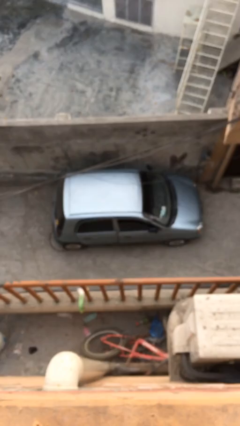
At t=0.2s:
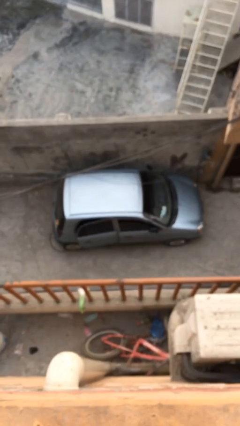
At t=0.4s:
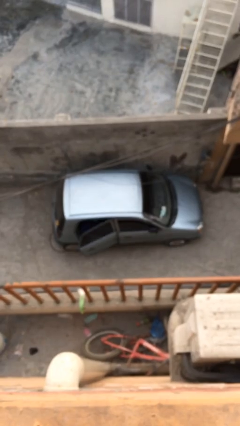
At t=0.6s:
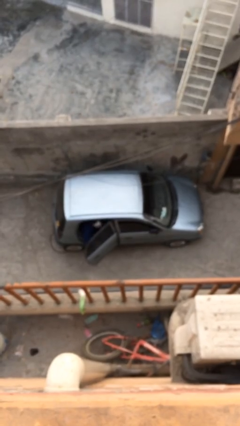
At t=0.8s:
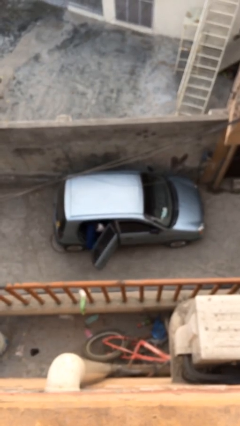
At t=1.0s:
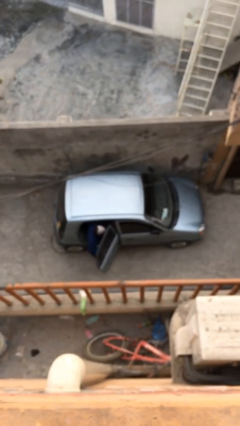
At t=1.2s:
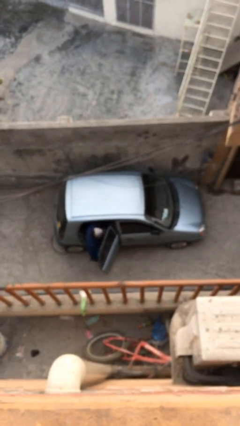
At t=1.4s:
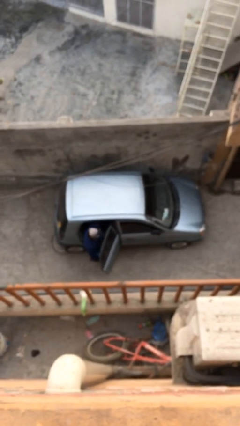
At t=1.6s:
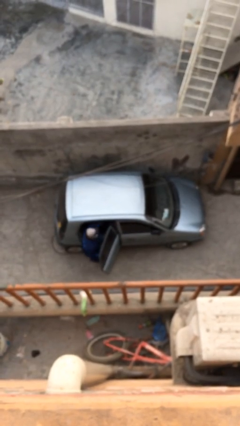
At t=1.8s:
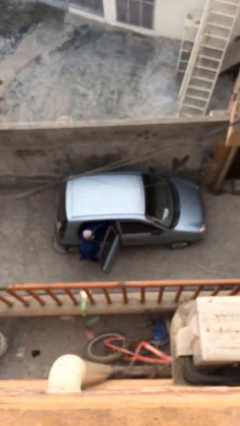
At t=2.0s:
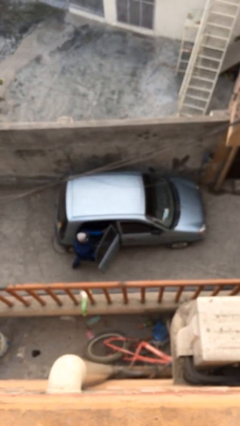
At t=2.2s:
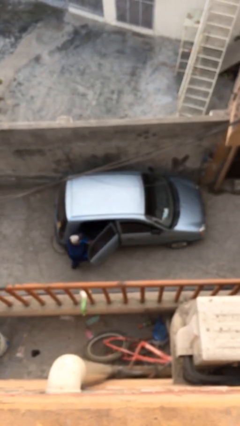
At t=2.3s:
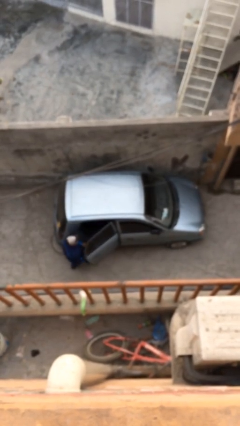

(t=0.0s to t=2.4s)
car drops off person

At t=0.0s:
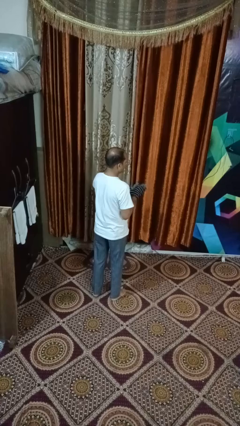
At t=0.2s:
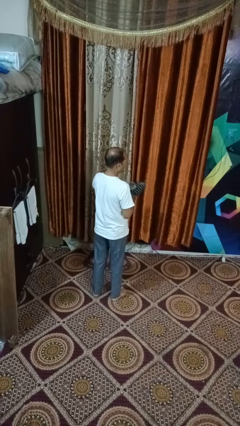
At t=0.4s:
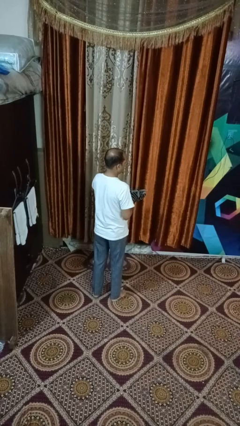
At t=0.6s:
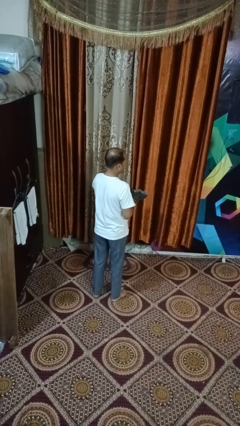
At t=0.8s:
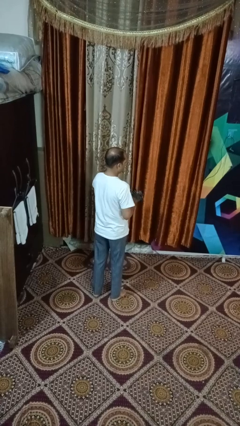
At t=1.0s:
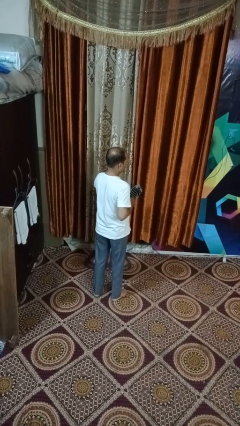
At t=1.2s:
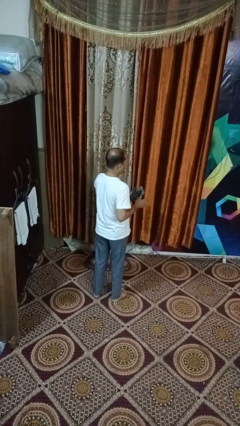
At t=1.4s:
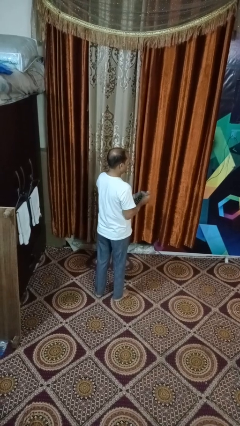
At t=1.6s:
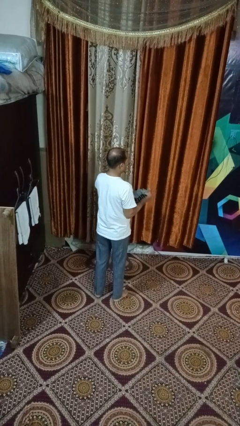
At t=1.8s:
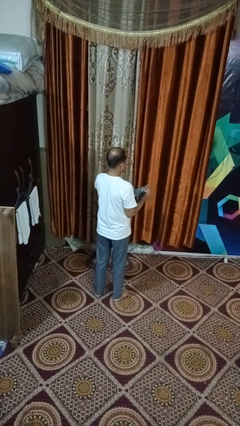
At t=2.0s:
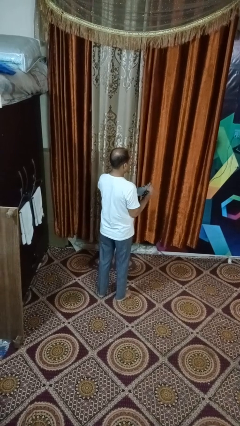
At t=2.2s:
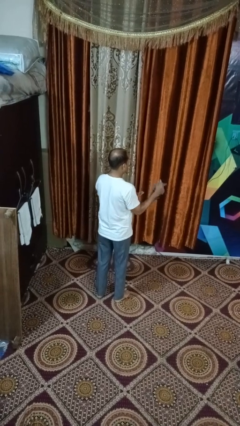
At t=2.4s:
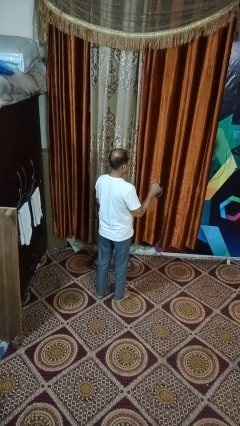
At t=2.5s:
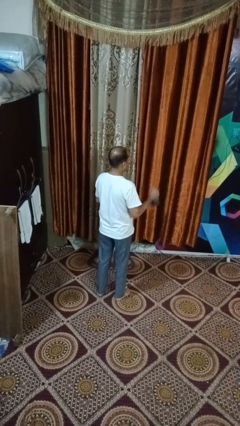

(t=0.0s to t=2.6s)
person takes off gloves

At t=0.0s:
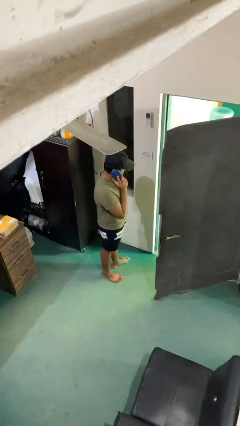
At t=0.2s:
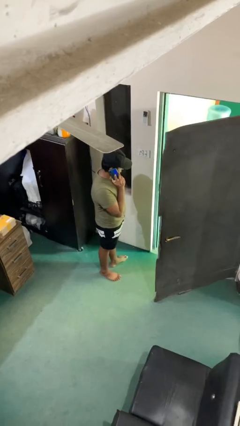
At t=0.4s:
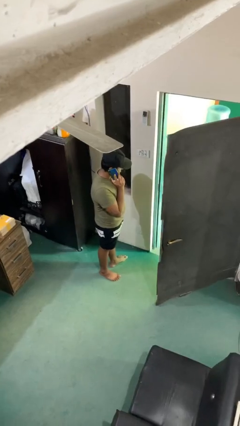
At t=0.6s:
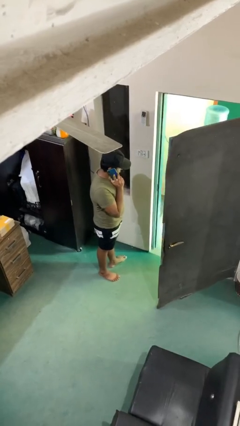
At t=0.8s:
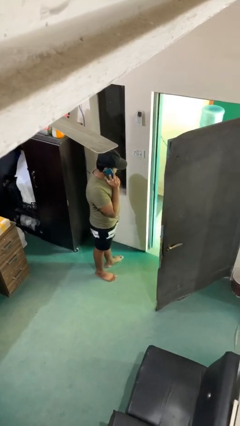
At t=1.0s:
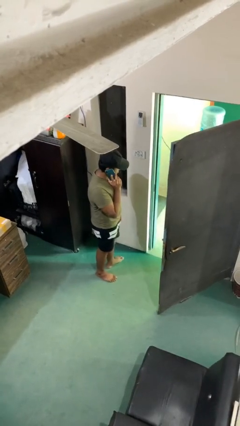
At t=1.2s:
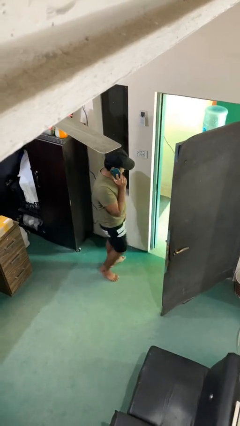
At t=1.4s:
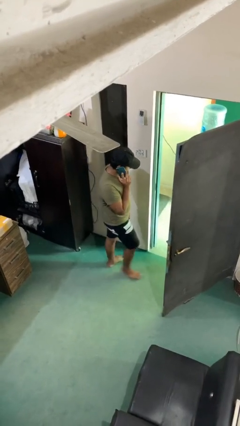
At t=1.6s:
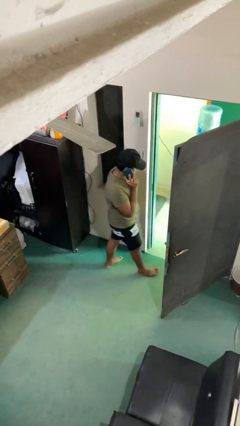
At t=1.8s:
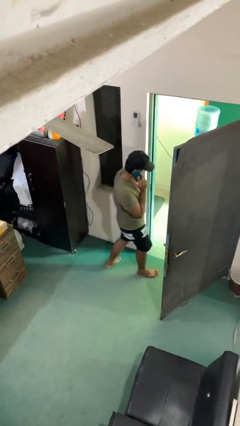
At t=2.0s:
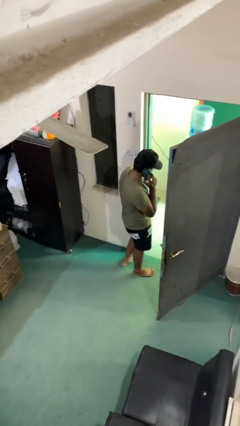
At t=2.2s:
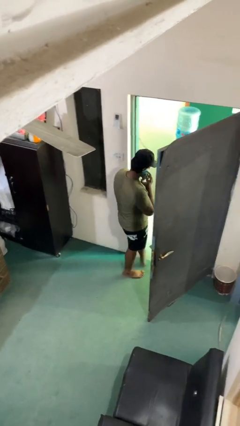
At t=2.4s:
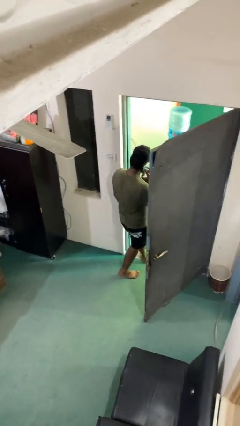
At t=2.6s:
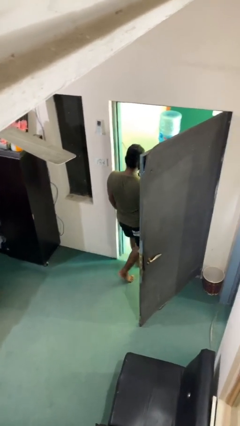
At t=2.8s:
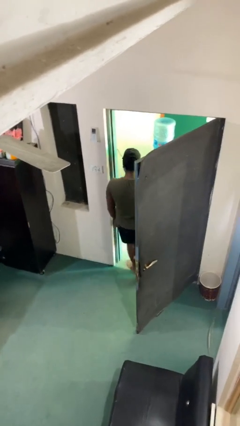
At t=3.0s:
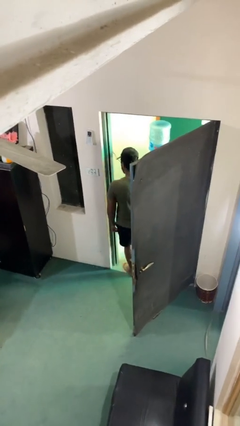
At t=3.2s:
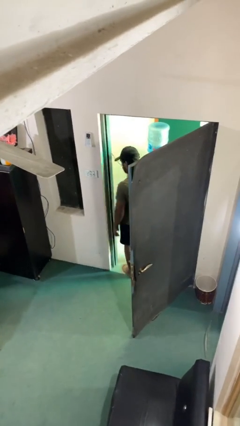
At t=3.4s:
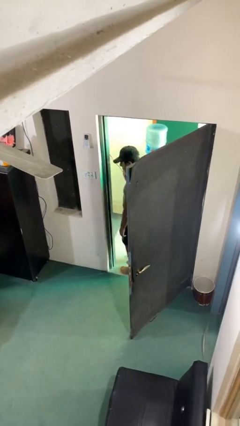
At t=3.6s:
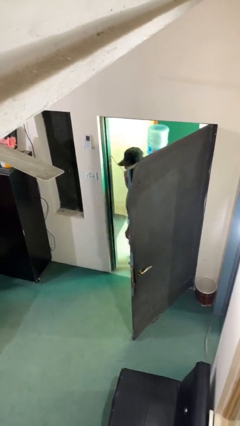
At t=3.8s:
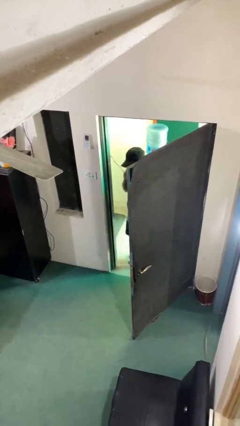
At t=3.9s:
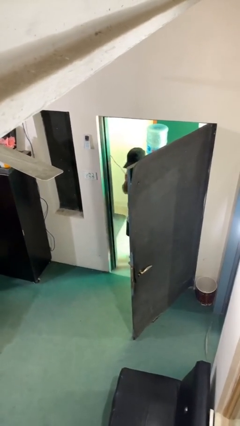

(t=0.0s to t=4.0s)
person exits scene through structure

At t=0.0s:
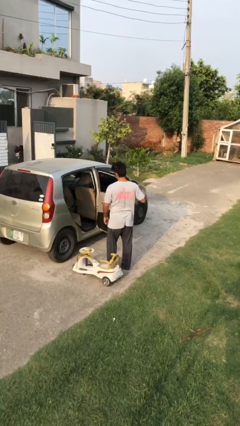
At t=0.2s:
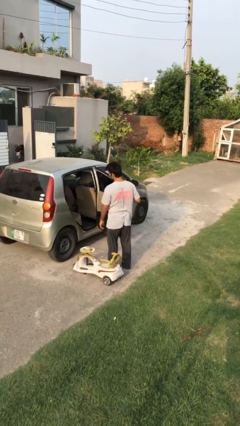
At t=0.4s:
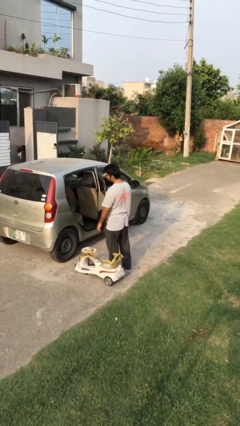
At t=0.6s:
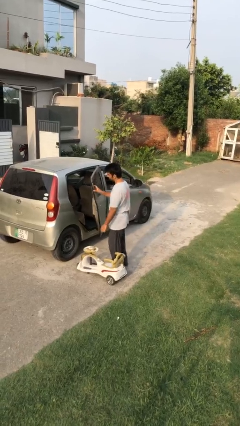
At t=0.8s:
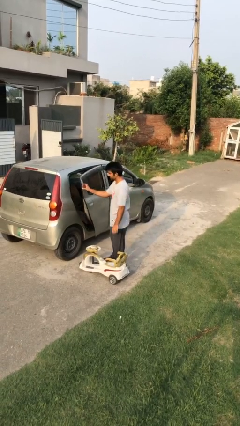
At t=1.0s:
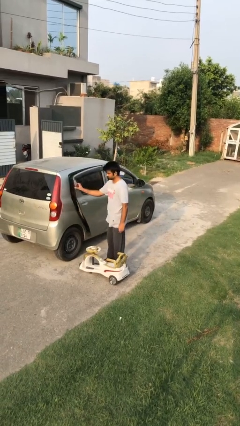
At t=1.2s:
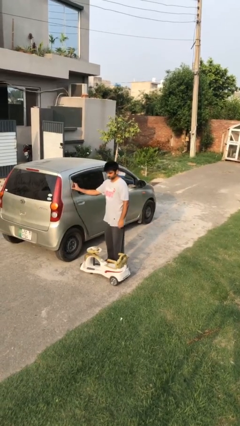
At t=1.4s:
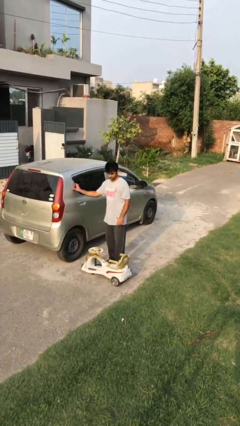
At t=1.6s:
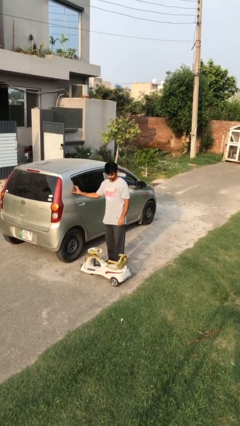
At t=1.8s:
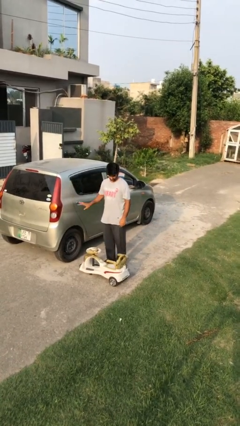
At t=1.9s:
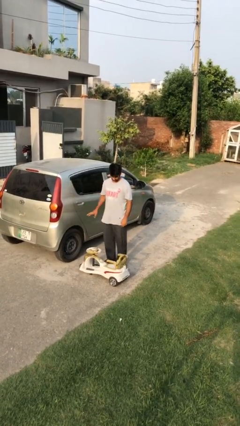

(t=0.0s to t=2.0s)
person closes car door

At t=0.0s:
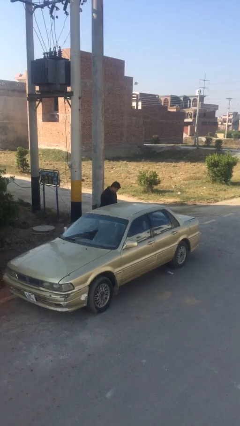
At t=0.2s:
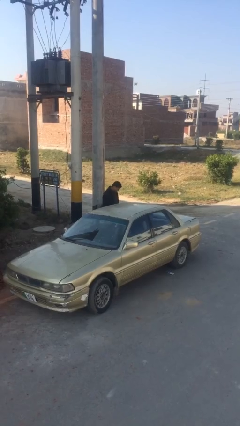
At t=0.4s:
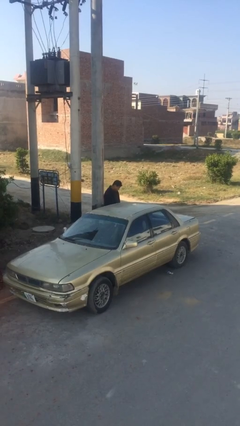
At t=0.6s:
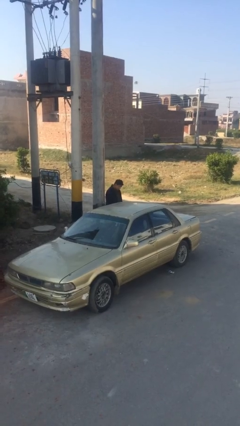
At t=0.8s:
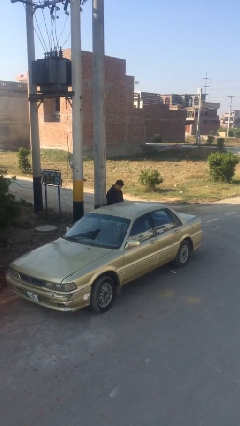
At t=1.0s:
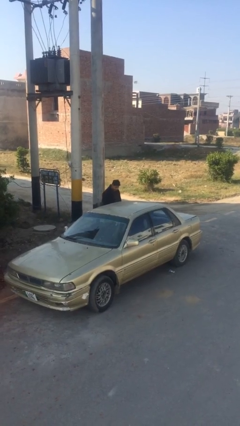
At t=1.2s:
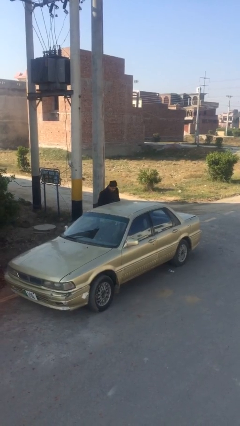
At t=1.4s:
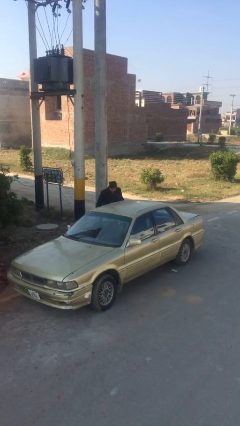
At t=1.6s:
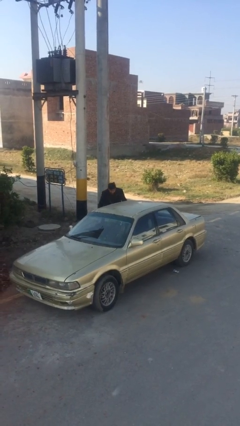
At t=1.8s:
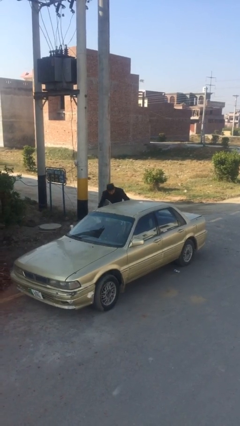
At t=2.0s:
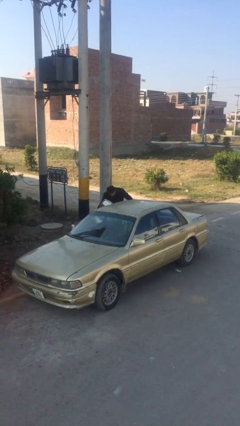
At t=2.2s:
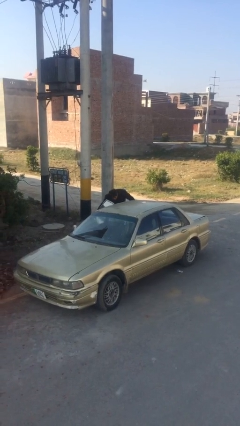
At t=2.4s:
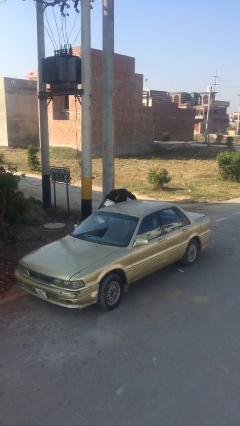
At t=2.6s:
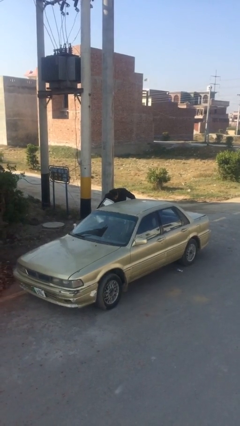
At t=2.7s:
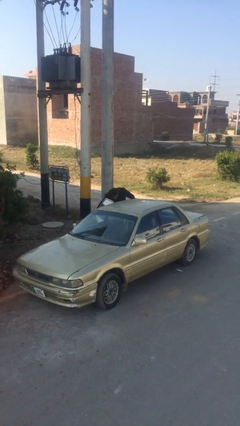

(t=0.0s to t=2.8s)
person opens car door

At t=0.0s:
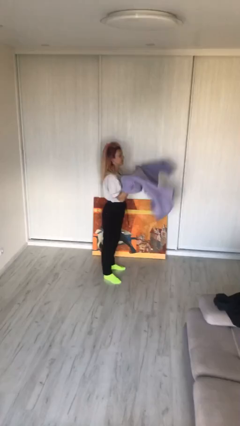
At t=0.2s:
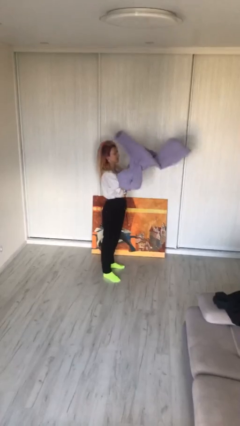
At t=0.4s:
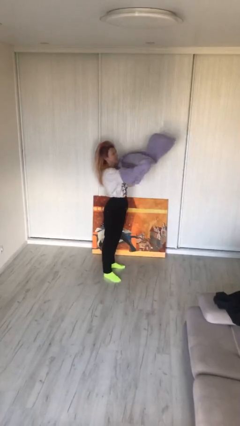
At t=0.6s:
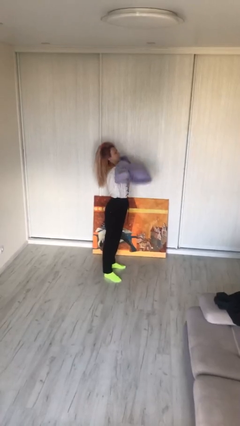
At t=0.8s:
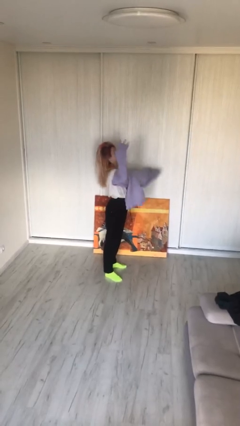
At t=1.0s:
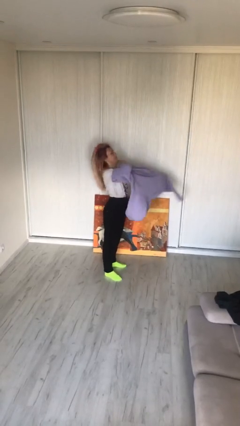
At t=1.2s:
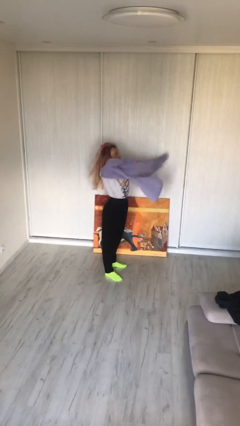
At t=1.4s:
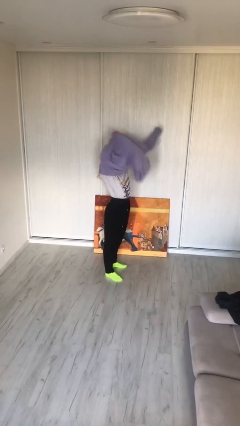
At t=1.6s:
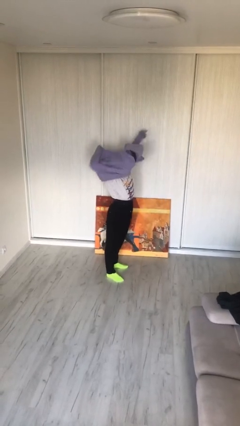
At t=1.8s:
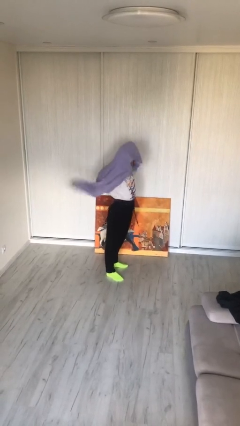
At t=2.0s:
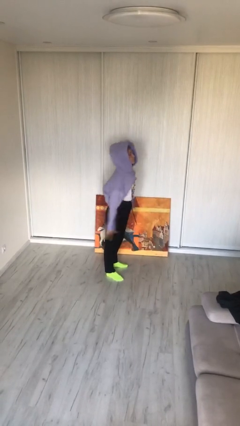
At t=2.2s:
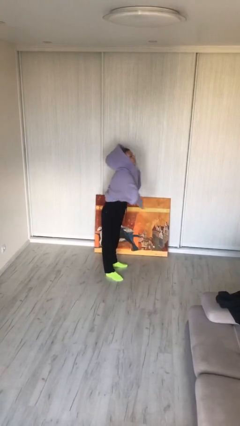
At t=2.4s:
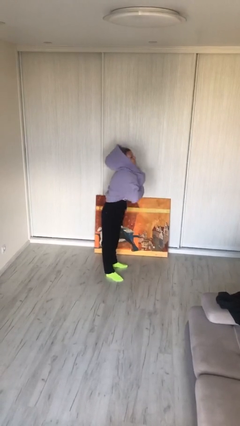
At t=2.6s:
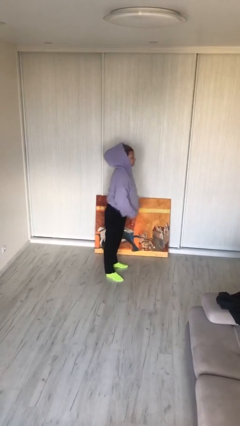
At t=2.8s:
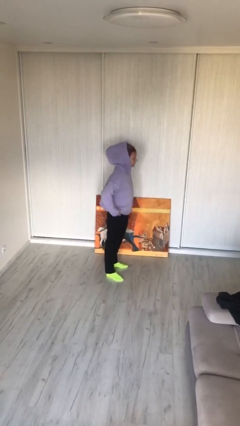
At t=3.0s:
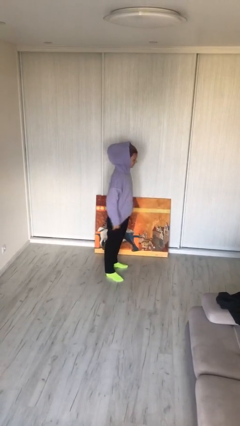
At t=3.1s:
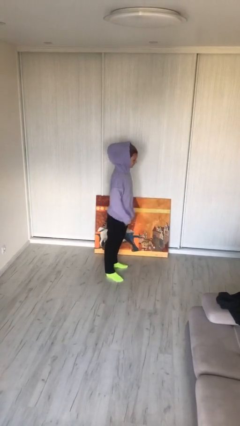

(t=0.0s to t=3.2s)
person puts on hoodie

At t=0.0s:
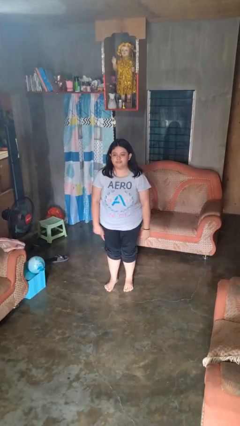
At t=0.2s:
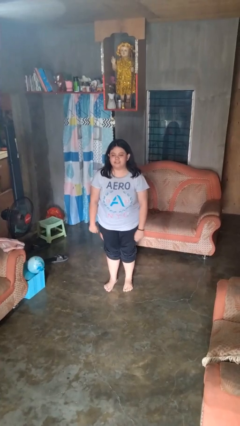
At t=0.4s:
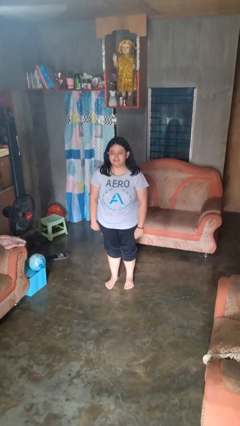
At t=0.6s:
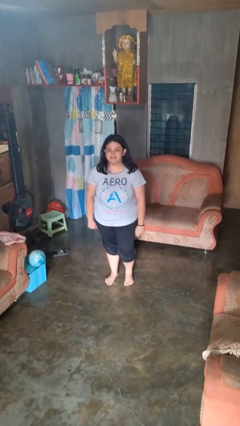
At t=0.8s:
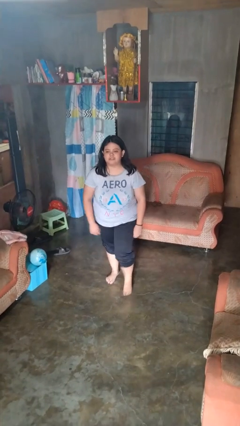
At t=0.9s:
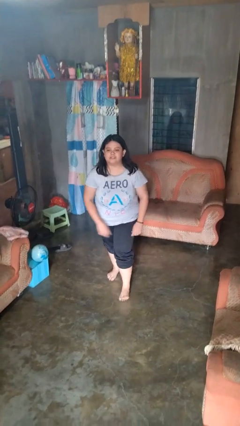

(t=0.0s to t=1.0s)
person kneels
